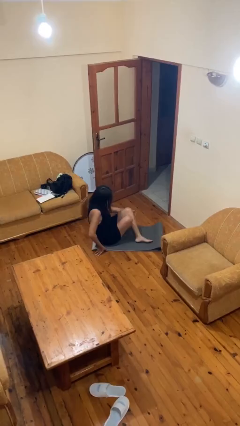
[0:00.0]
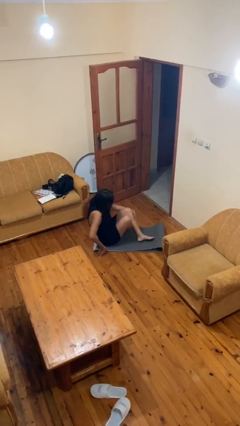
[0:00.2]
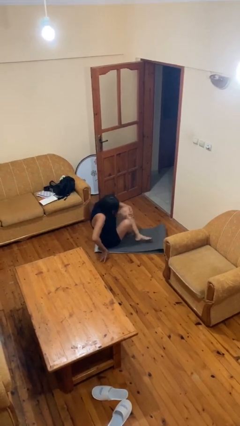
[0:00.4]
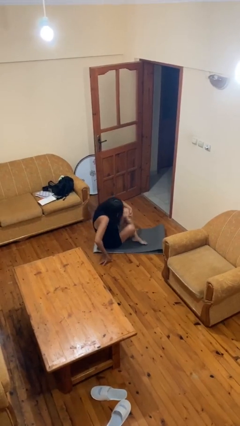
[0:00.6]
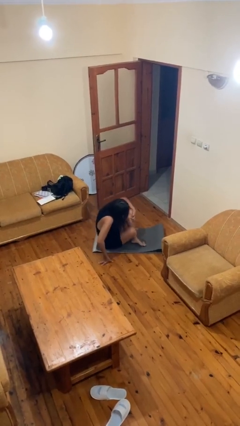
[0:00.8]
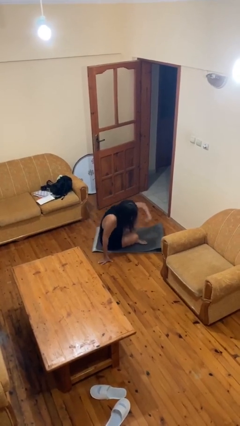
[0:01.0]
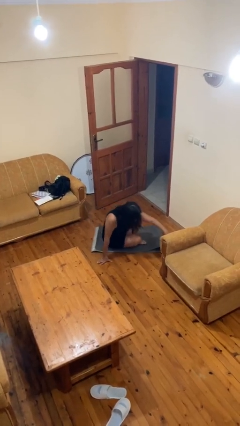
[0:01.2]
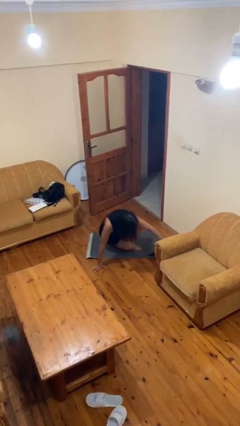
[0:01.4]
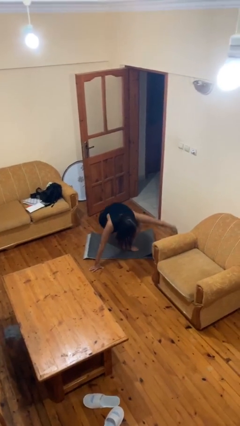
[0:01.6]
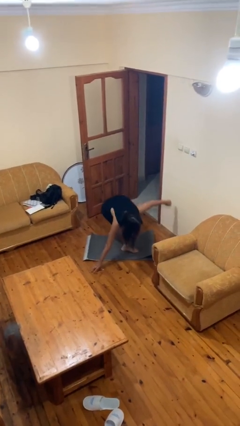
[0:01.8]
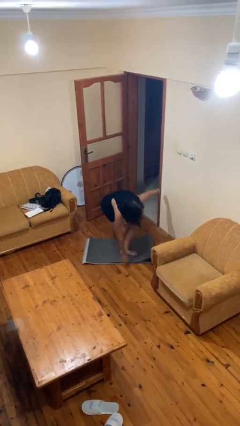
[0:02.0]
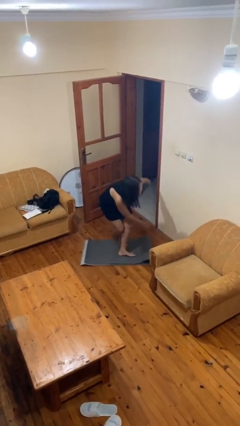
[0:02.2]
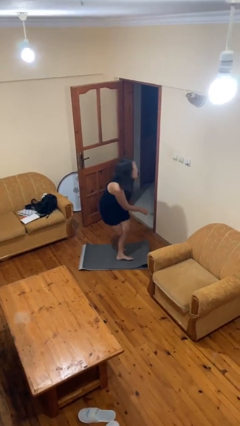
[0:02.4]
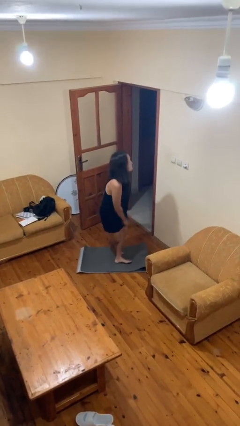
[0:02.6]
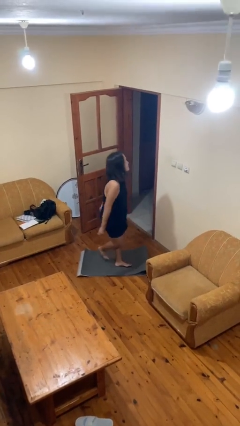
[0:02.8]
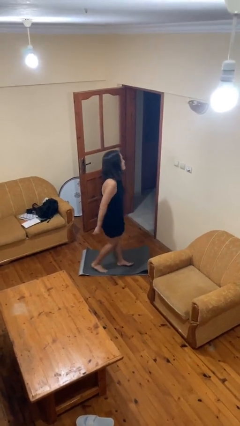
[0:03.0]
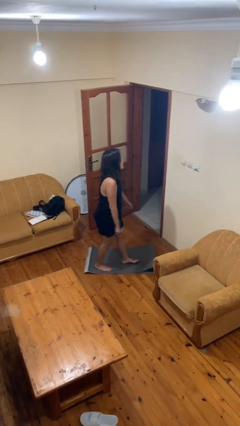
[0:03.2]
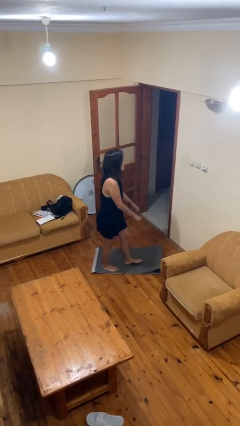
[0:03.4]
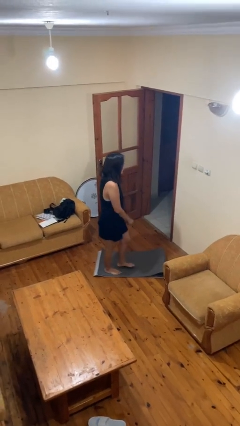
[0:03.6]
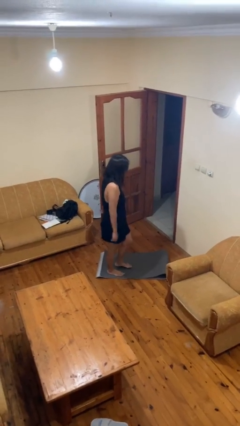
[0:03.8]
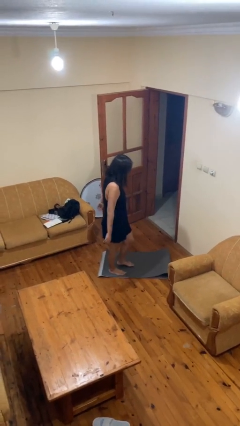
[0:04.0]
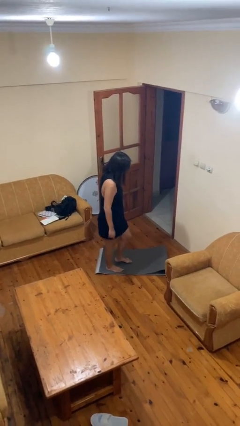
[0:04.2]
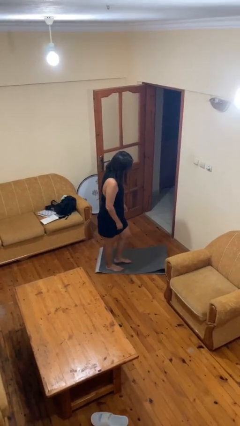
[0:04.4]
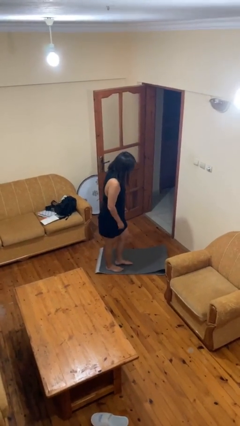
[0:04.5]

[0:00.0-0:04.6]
person stands up from floor

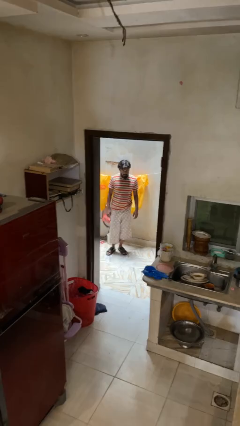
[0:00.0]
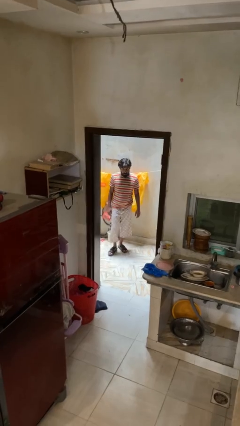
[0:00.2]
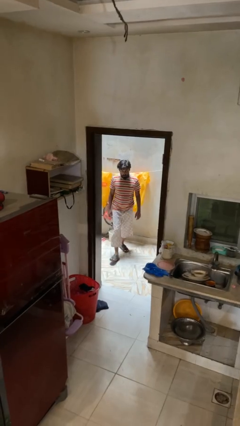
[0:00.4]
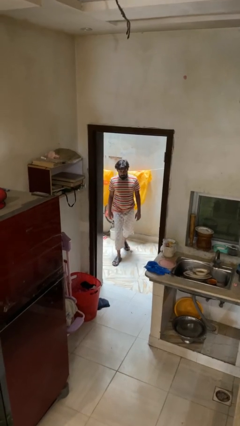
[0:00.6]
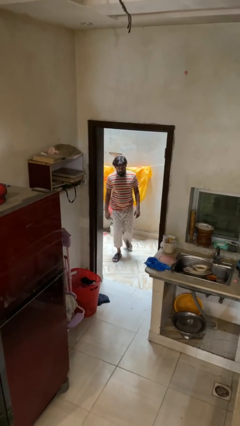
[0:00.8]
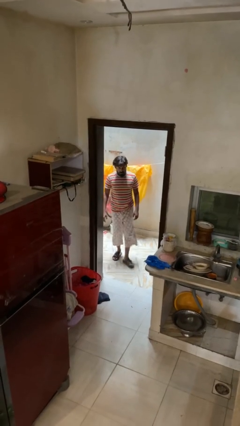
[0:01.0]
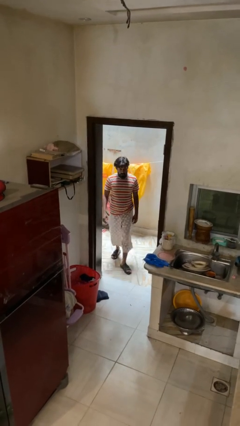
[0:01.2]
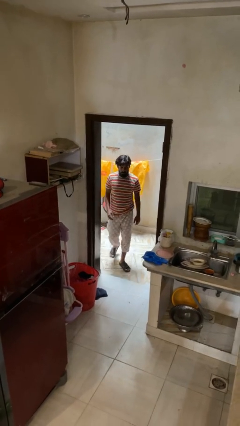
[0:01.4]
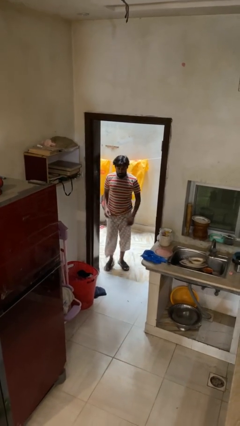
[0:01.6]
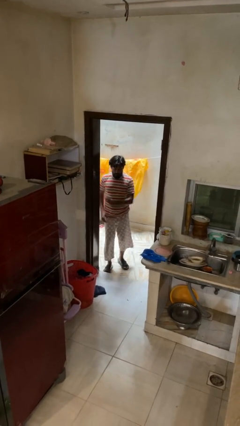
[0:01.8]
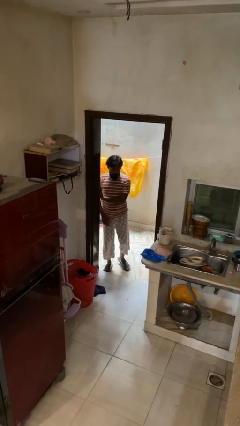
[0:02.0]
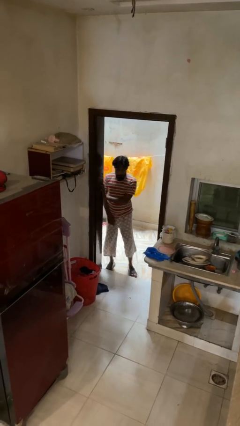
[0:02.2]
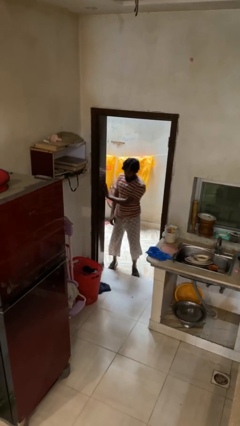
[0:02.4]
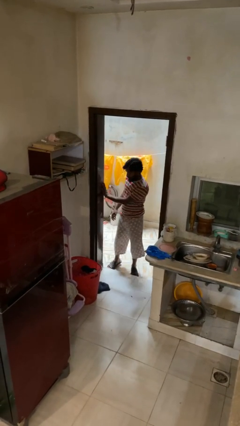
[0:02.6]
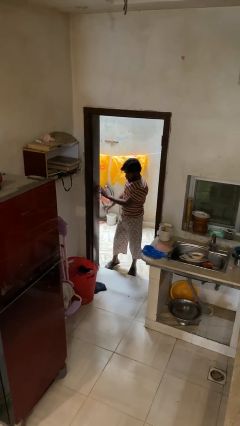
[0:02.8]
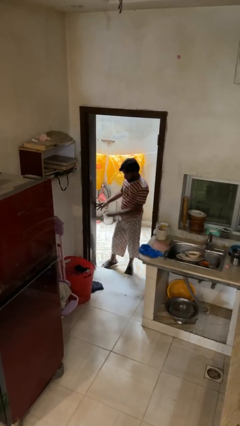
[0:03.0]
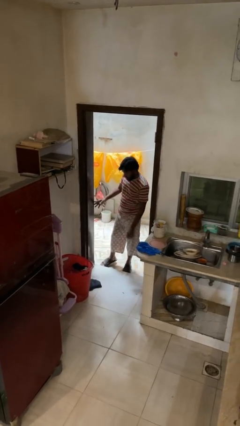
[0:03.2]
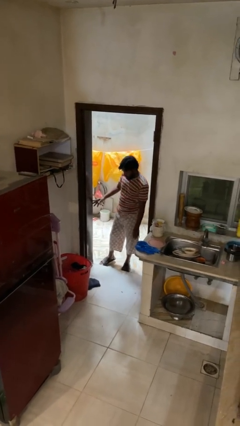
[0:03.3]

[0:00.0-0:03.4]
person bumps into wall

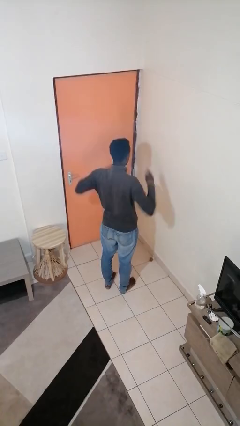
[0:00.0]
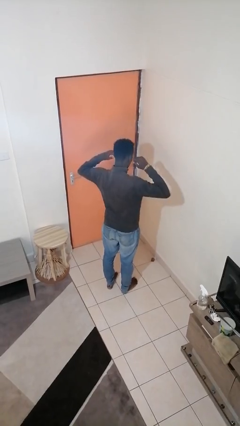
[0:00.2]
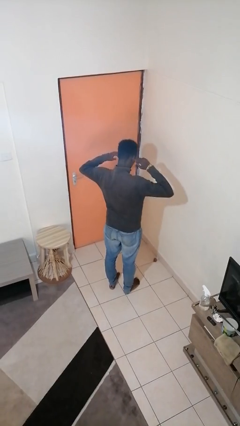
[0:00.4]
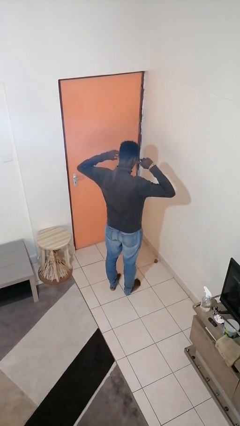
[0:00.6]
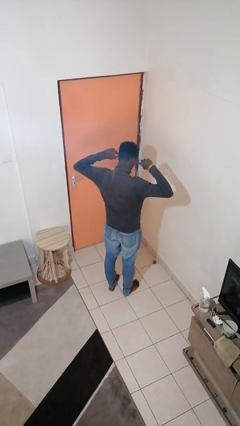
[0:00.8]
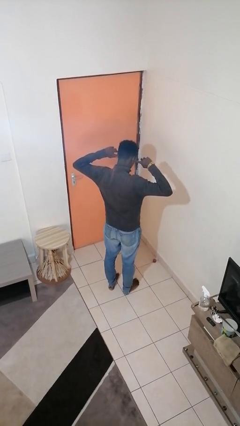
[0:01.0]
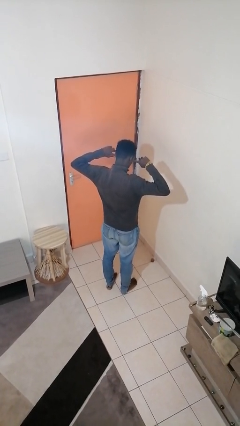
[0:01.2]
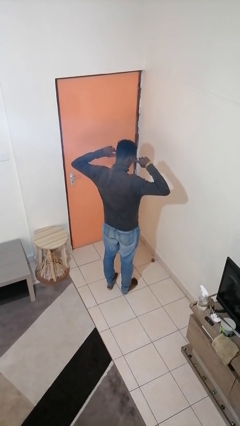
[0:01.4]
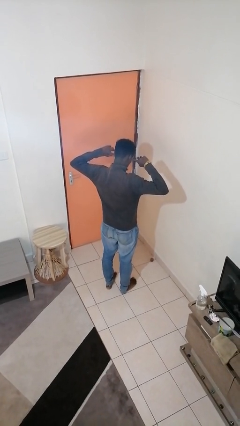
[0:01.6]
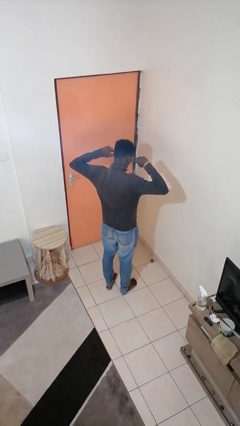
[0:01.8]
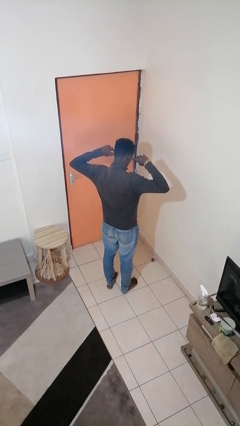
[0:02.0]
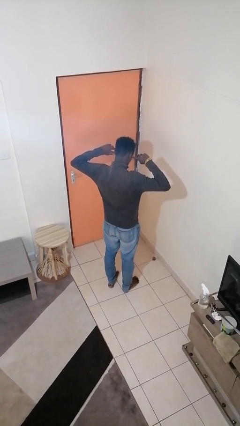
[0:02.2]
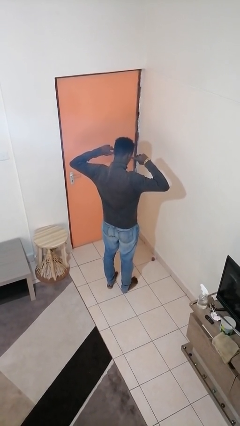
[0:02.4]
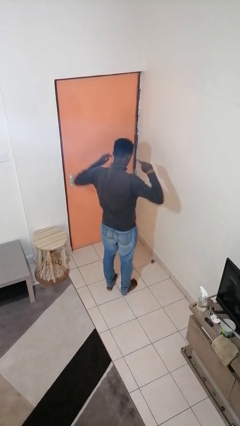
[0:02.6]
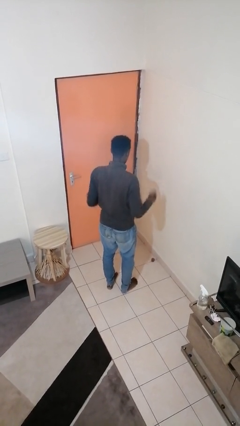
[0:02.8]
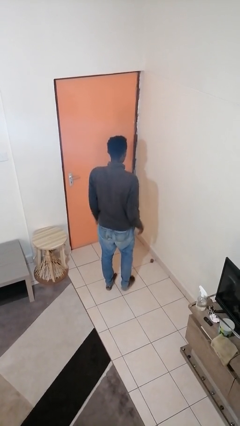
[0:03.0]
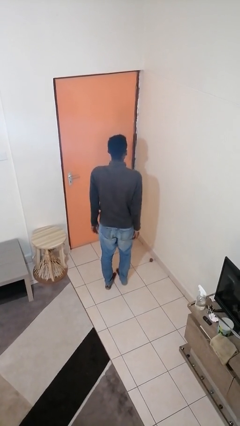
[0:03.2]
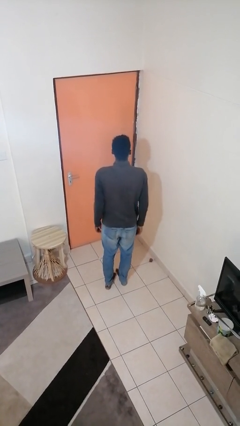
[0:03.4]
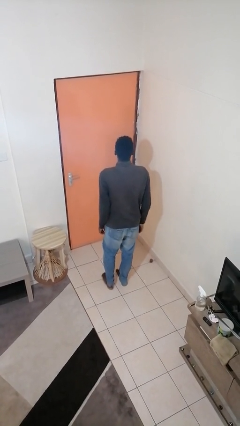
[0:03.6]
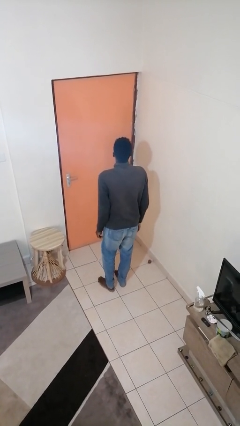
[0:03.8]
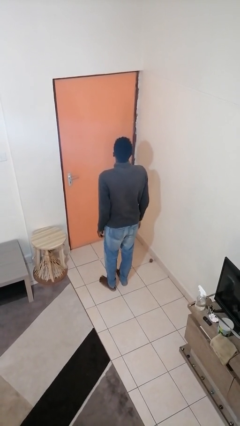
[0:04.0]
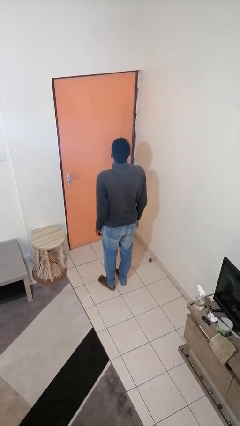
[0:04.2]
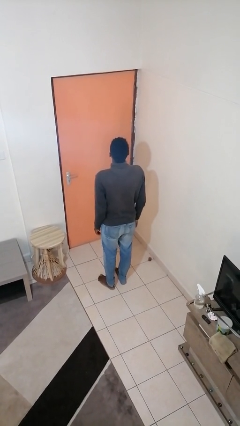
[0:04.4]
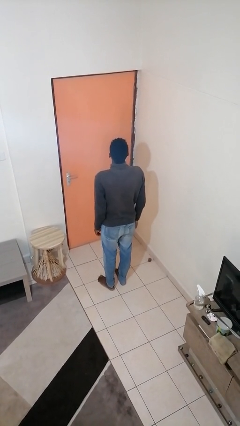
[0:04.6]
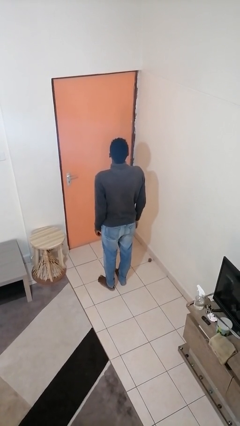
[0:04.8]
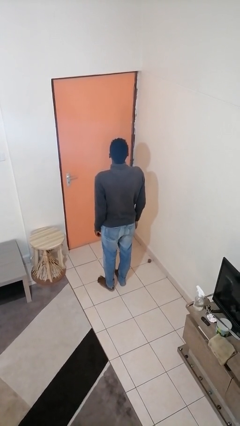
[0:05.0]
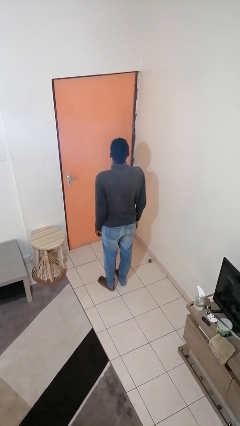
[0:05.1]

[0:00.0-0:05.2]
person puts fingers in ear

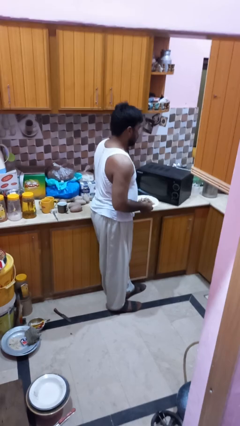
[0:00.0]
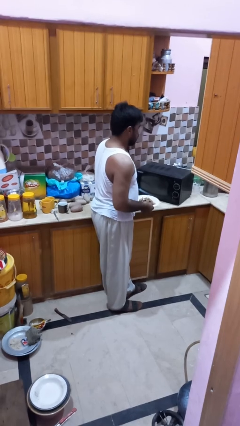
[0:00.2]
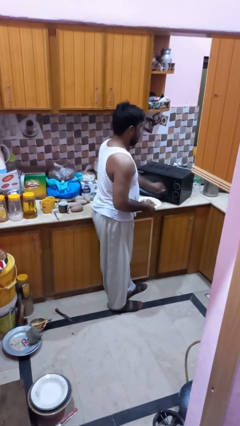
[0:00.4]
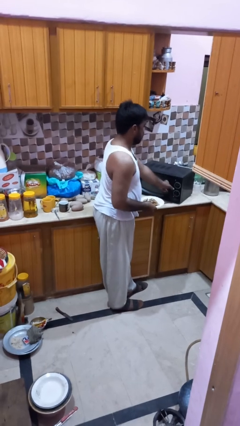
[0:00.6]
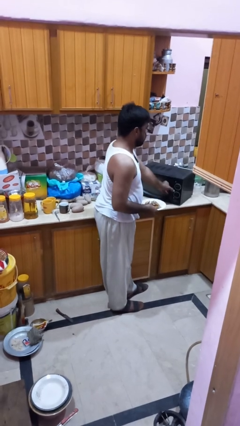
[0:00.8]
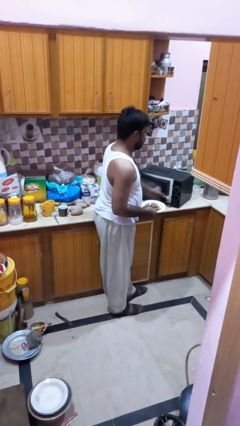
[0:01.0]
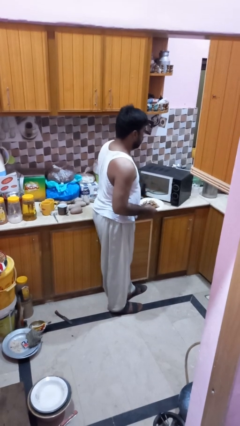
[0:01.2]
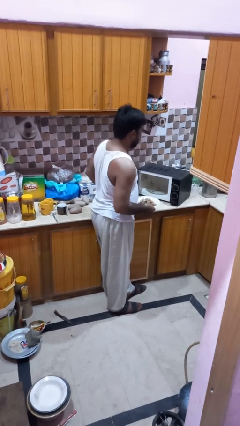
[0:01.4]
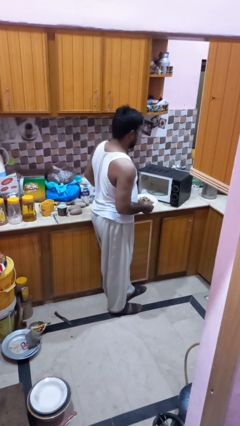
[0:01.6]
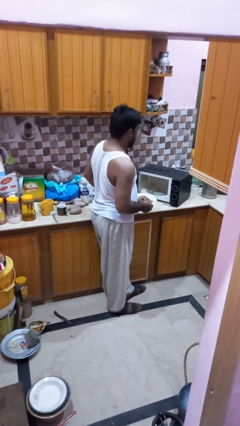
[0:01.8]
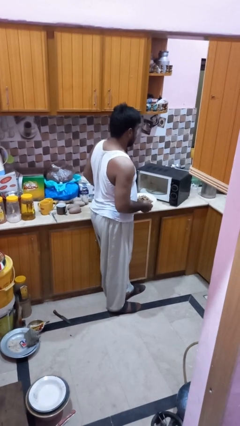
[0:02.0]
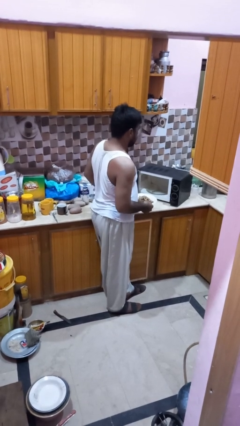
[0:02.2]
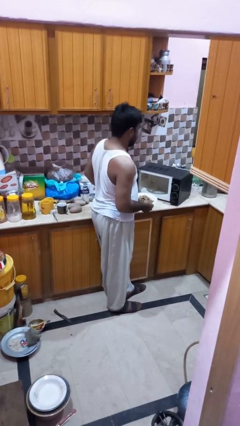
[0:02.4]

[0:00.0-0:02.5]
person opens microwave

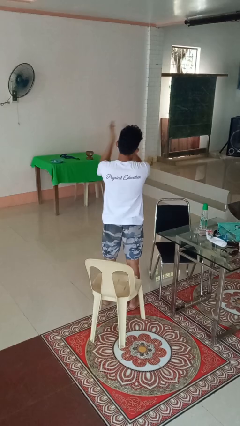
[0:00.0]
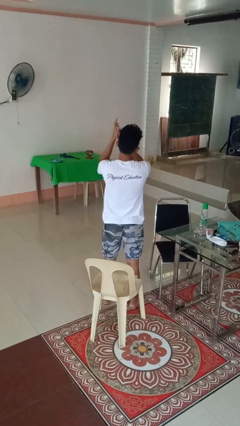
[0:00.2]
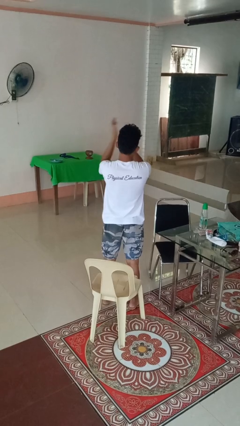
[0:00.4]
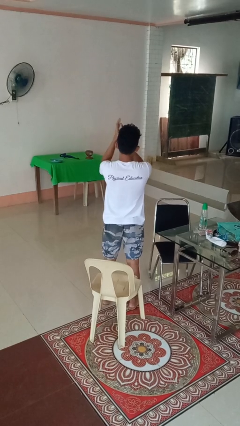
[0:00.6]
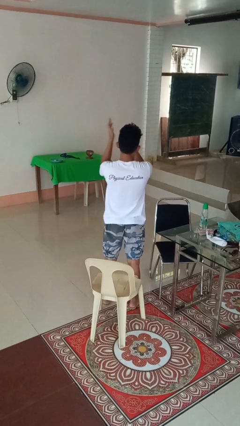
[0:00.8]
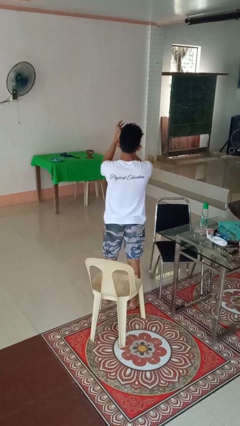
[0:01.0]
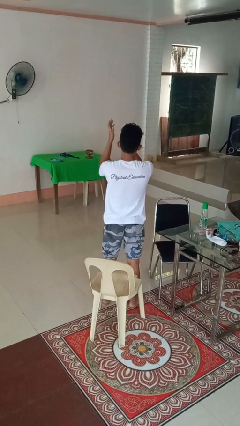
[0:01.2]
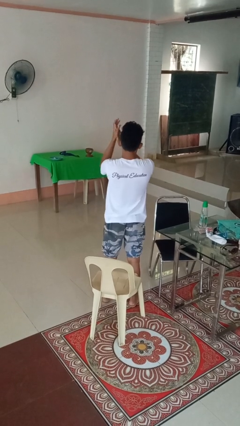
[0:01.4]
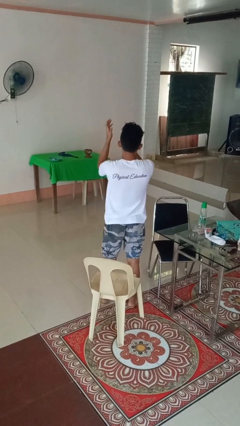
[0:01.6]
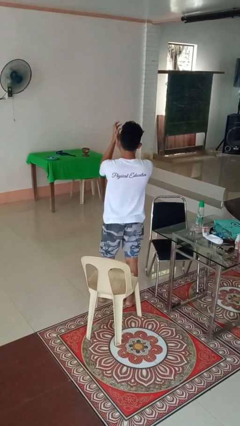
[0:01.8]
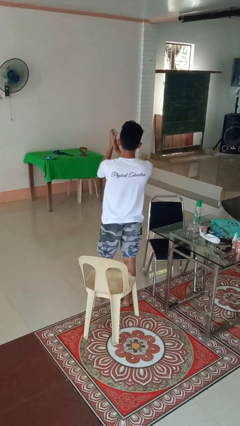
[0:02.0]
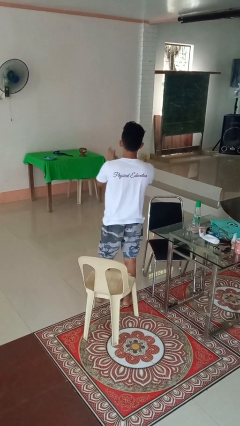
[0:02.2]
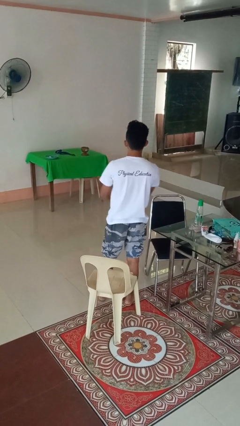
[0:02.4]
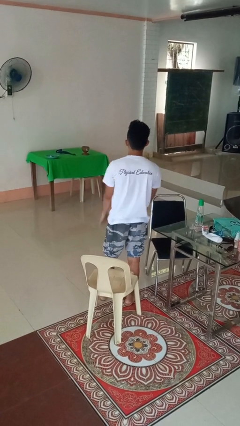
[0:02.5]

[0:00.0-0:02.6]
person claps hands
